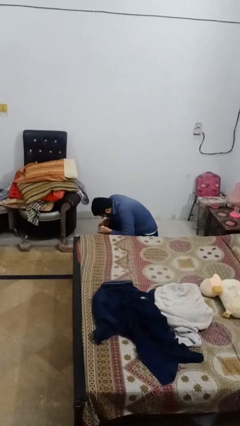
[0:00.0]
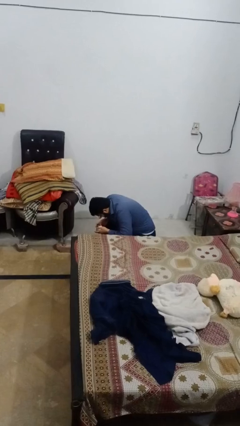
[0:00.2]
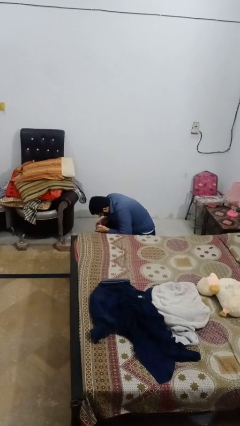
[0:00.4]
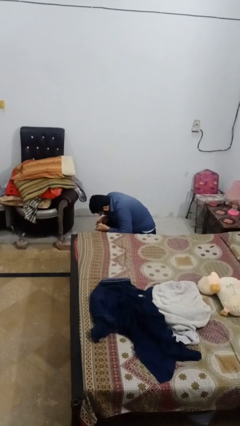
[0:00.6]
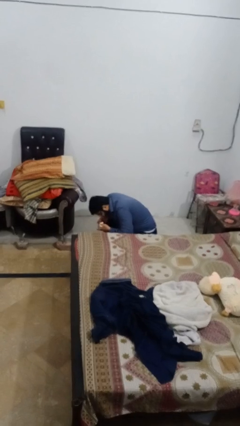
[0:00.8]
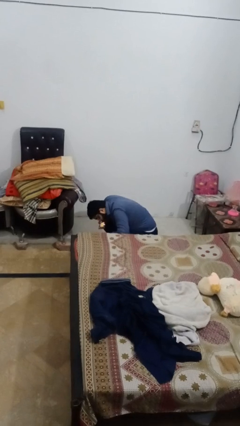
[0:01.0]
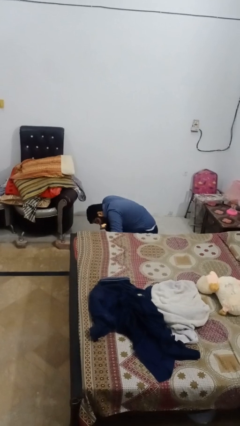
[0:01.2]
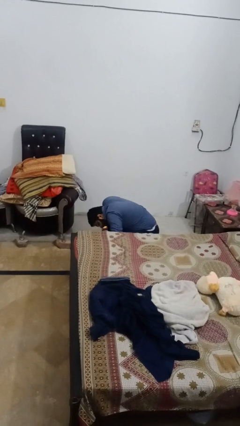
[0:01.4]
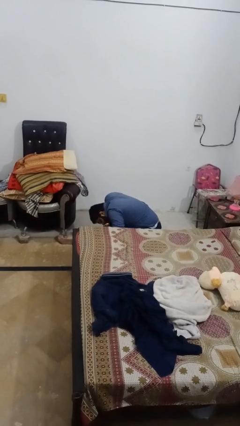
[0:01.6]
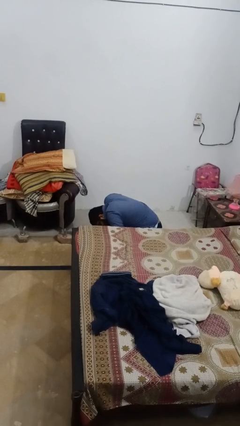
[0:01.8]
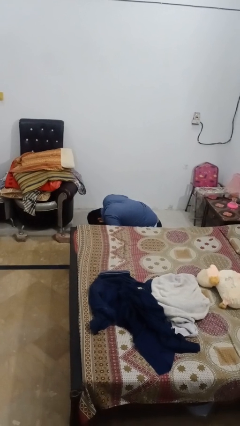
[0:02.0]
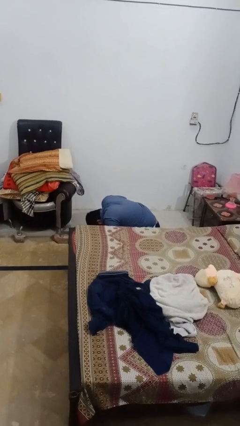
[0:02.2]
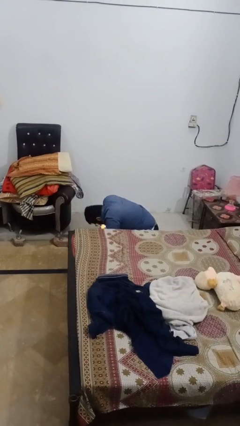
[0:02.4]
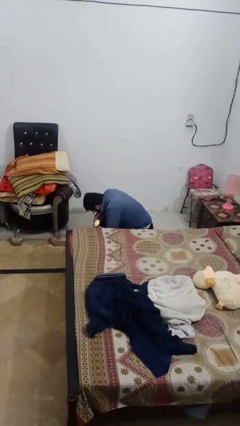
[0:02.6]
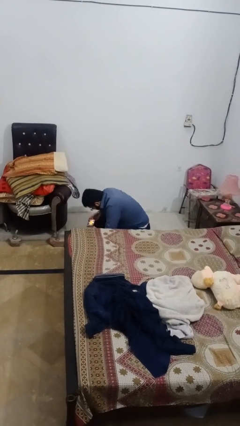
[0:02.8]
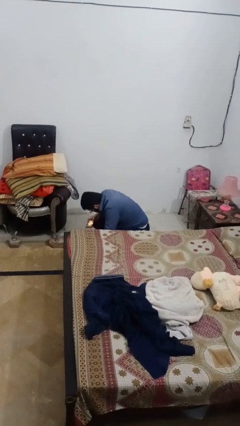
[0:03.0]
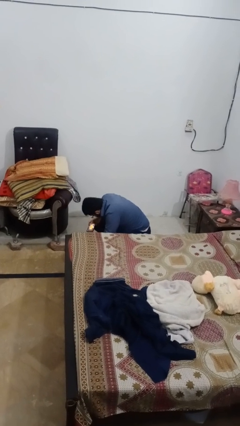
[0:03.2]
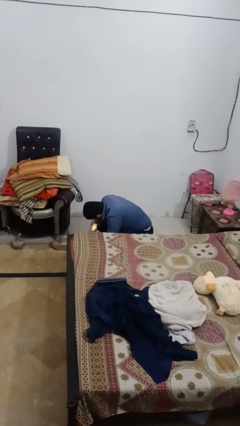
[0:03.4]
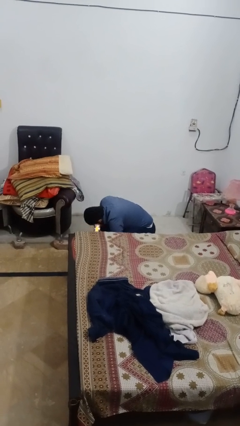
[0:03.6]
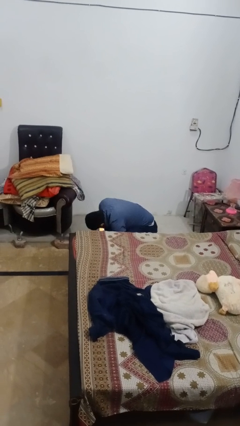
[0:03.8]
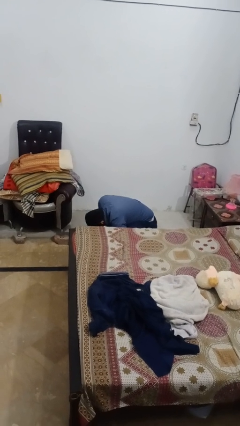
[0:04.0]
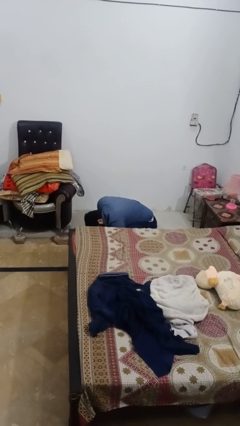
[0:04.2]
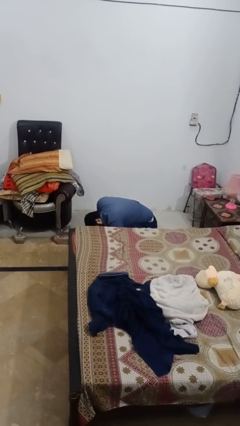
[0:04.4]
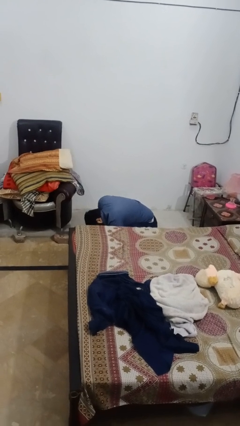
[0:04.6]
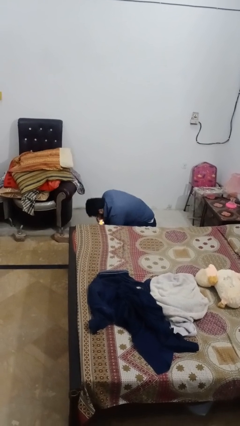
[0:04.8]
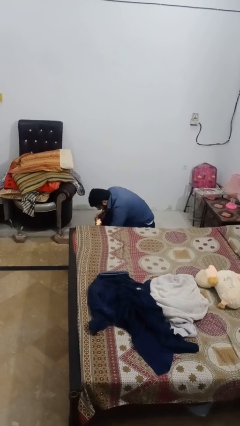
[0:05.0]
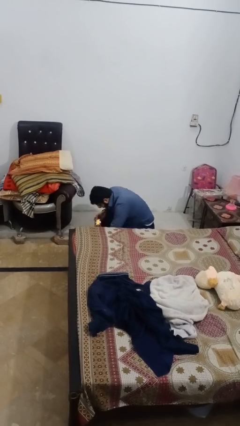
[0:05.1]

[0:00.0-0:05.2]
person searches under bed

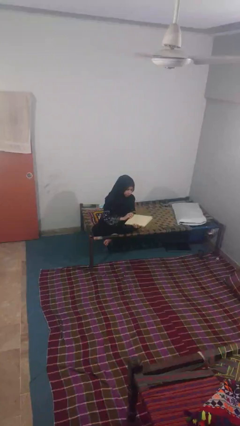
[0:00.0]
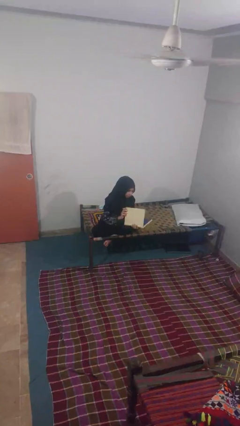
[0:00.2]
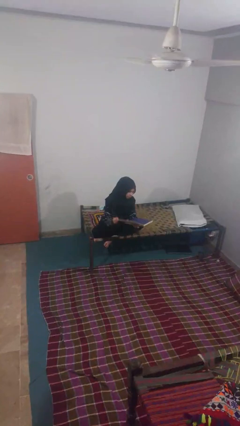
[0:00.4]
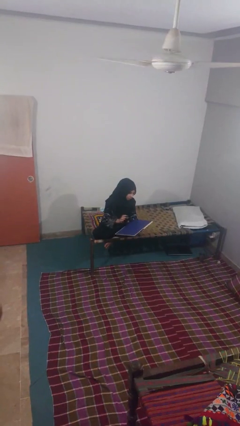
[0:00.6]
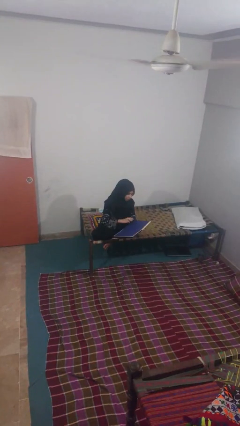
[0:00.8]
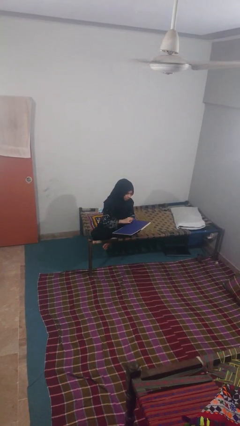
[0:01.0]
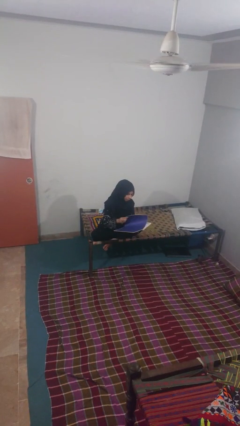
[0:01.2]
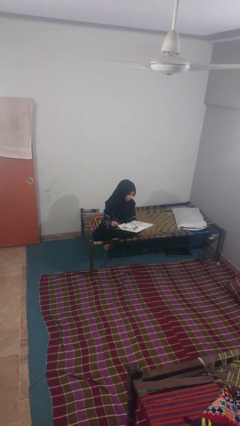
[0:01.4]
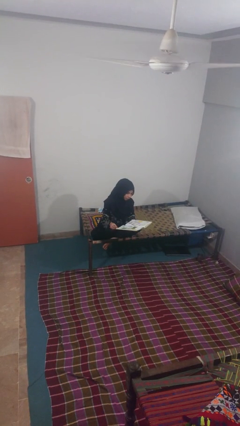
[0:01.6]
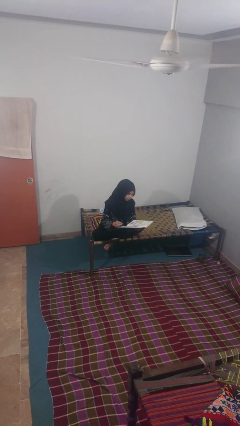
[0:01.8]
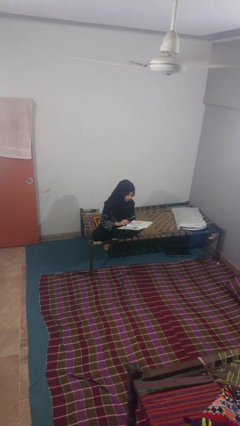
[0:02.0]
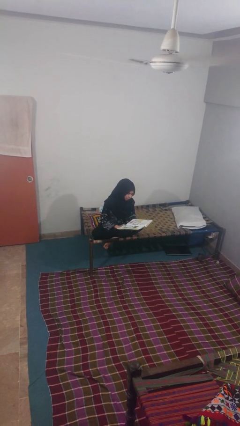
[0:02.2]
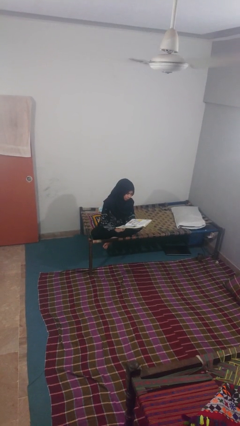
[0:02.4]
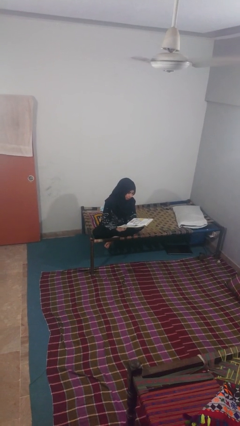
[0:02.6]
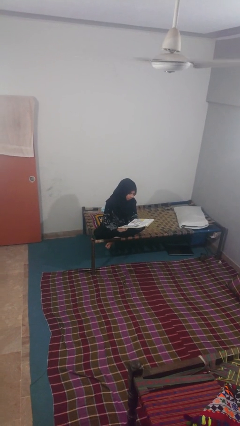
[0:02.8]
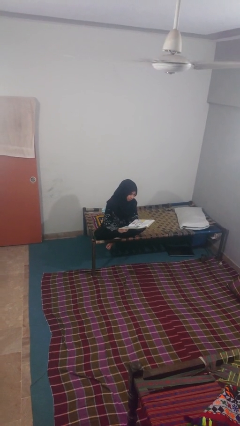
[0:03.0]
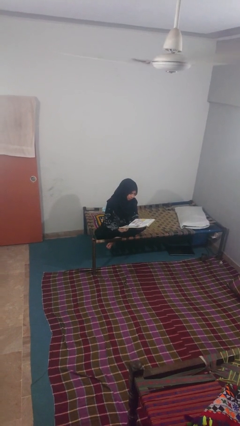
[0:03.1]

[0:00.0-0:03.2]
person reads magazine

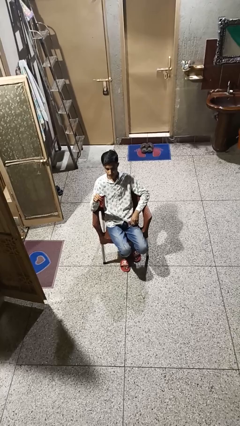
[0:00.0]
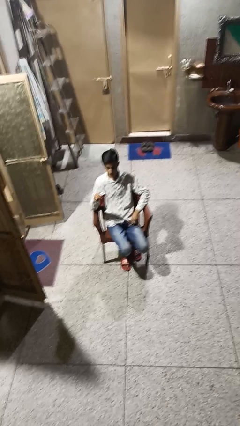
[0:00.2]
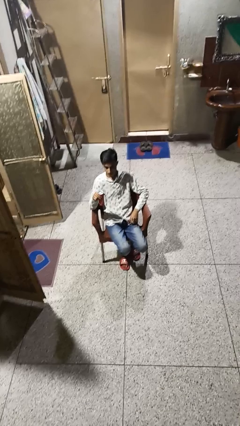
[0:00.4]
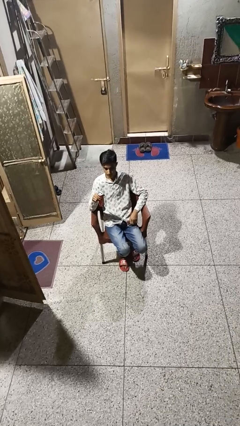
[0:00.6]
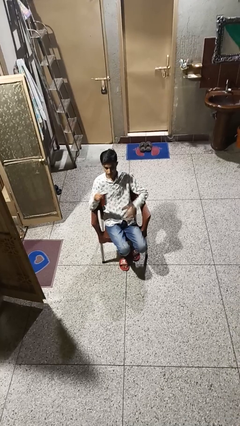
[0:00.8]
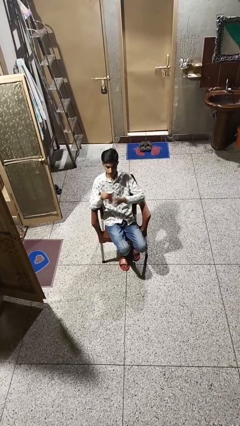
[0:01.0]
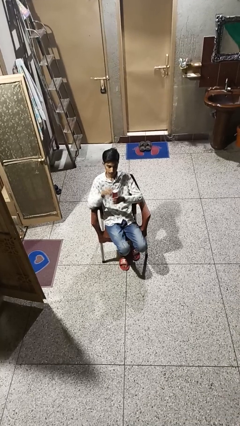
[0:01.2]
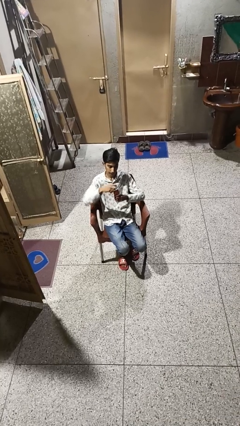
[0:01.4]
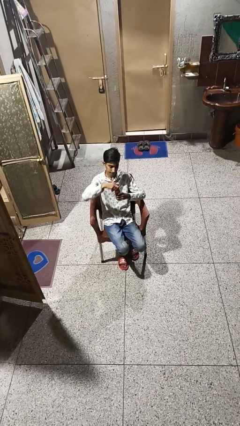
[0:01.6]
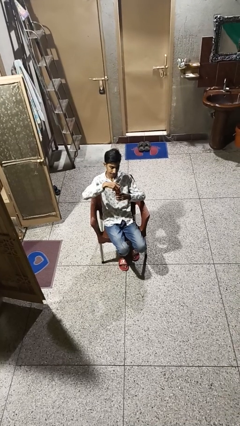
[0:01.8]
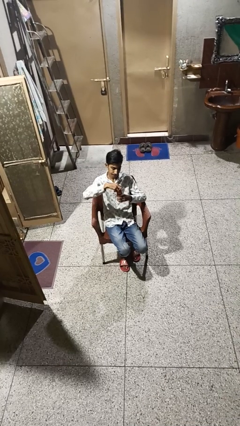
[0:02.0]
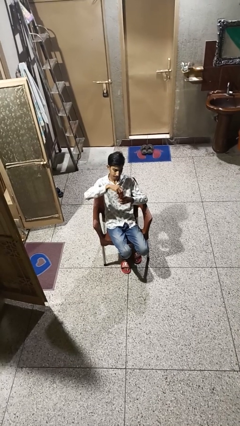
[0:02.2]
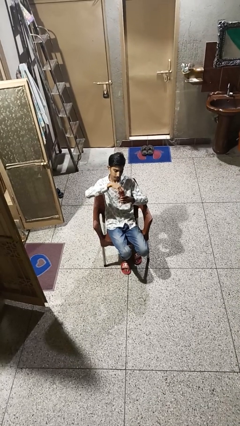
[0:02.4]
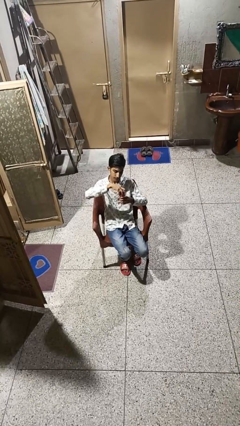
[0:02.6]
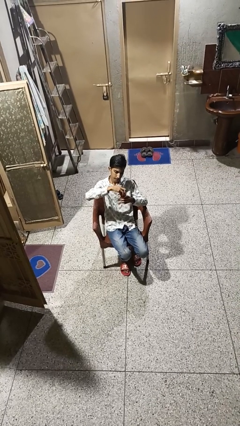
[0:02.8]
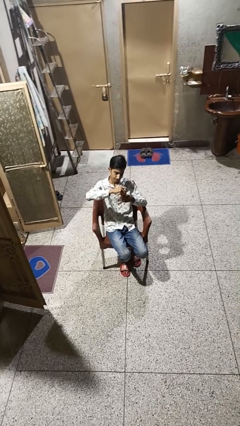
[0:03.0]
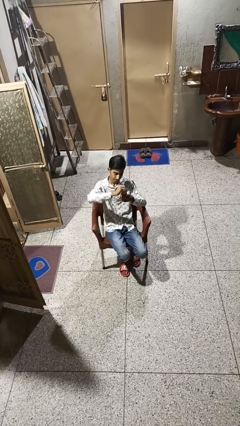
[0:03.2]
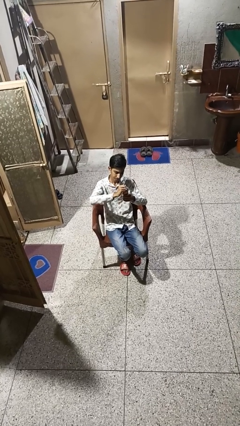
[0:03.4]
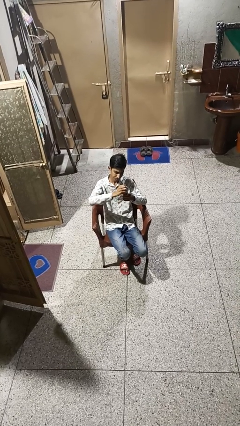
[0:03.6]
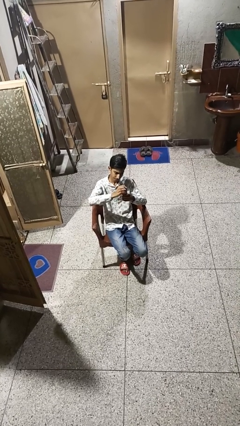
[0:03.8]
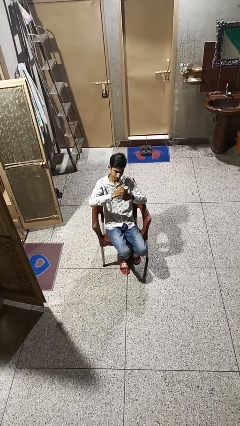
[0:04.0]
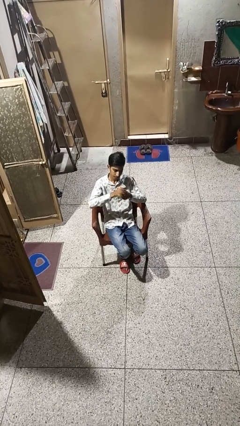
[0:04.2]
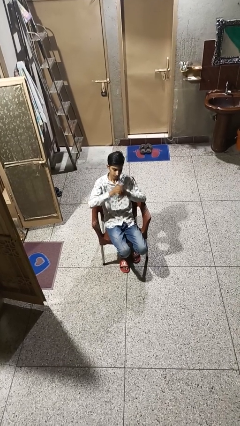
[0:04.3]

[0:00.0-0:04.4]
person opens beverage can

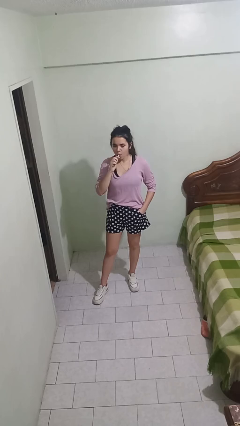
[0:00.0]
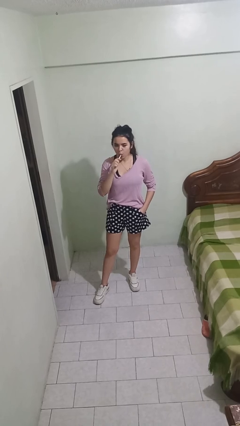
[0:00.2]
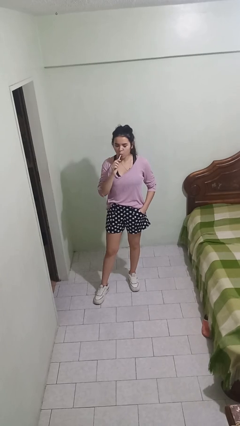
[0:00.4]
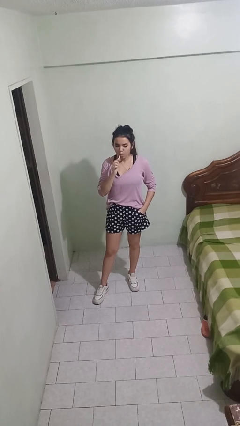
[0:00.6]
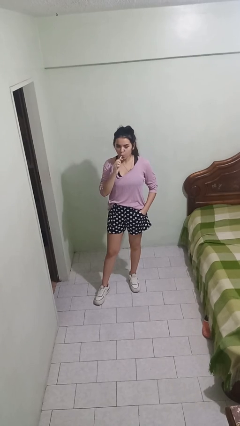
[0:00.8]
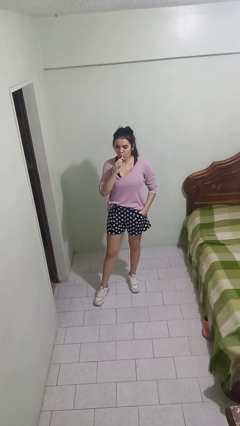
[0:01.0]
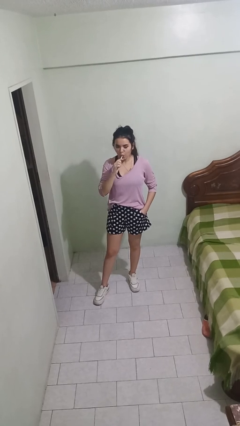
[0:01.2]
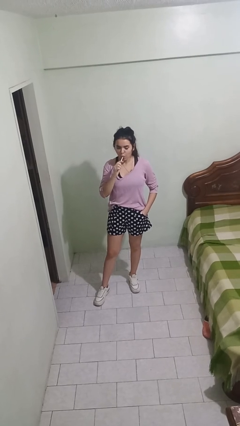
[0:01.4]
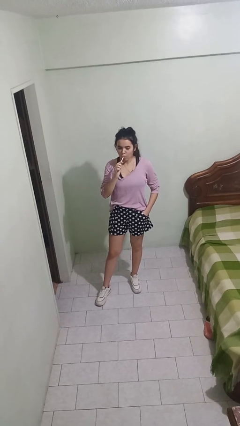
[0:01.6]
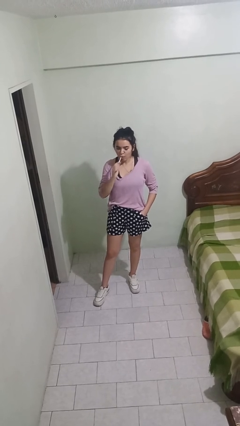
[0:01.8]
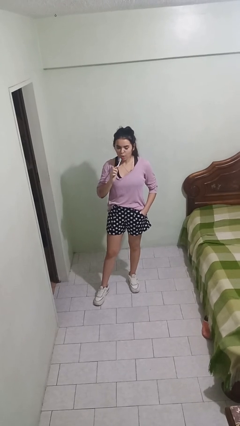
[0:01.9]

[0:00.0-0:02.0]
person brushes teeth

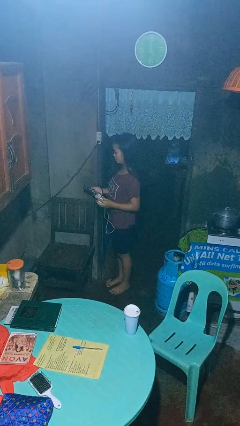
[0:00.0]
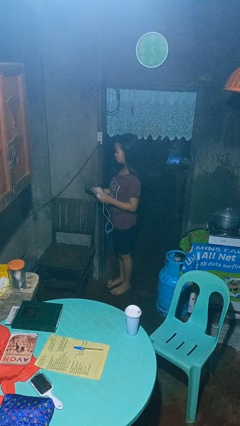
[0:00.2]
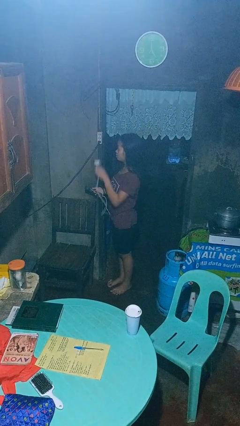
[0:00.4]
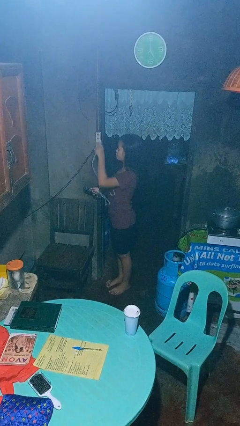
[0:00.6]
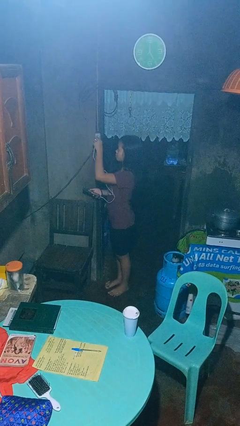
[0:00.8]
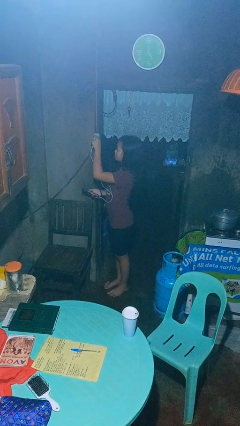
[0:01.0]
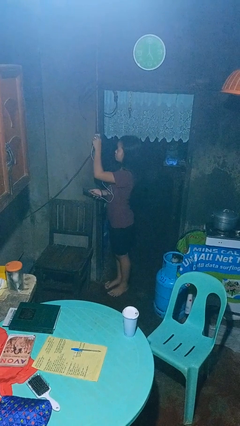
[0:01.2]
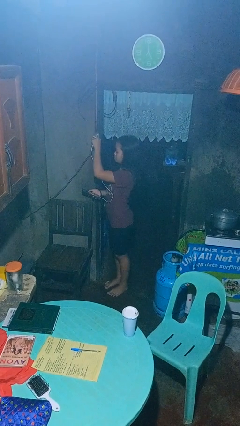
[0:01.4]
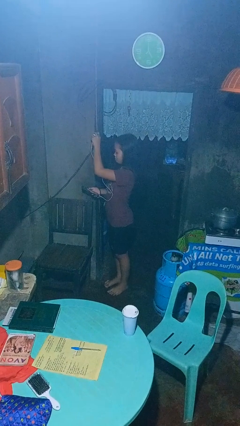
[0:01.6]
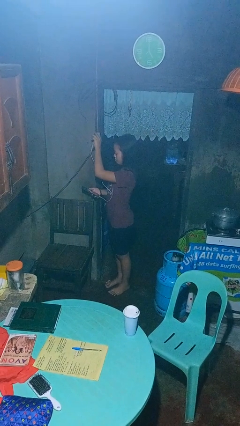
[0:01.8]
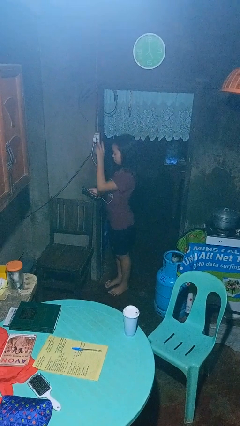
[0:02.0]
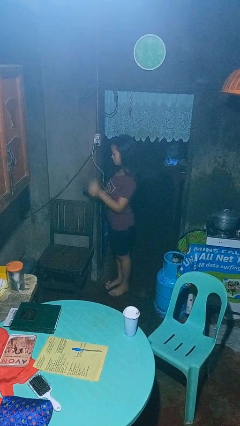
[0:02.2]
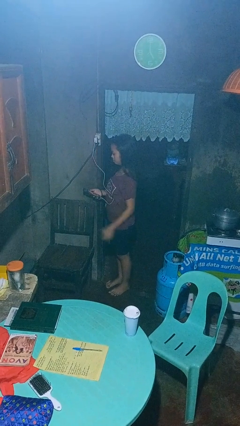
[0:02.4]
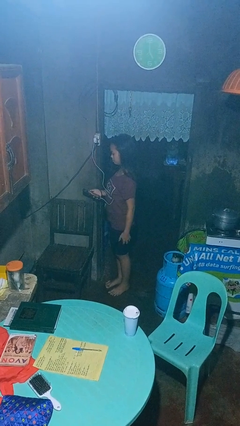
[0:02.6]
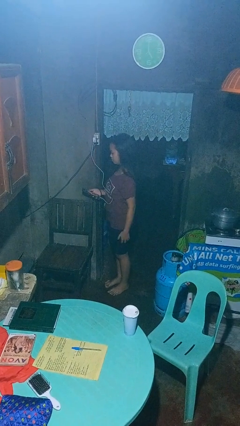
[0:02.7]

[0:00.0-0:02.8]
person plugs into electrical socket

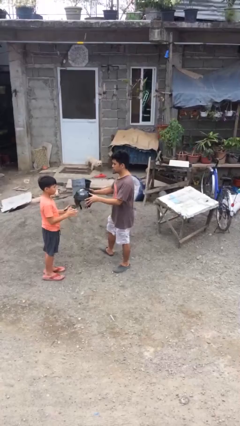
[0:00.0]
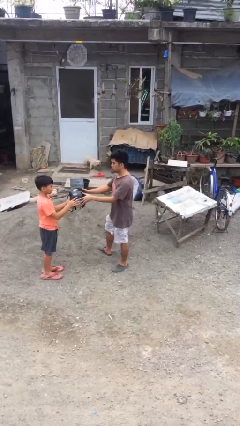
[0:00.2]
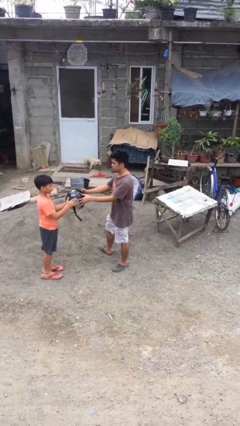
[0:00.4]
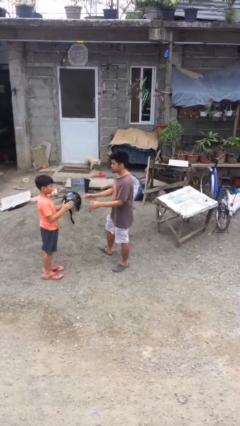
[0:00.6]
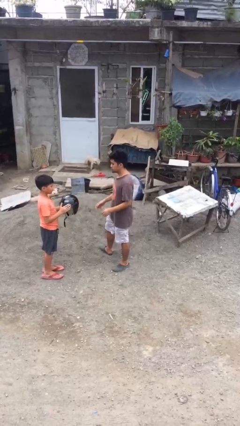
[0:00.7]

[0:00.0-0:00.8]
person transfers object to person
